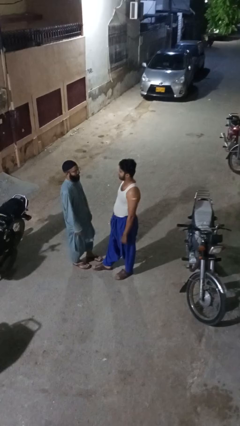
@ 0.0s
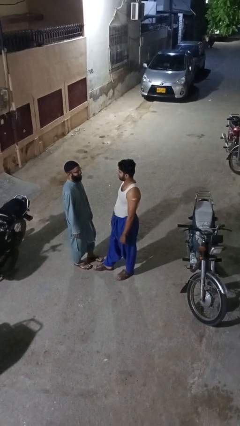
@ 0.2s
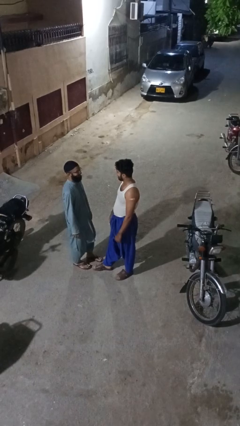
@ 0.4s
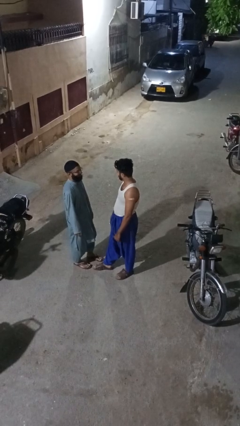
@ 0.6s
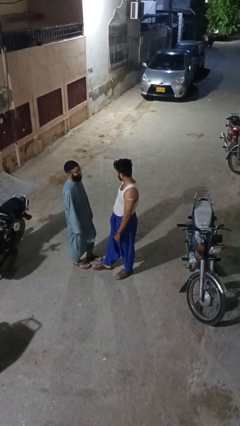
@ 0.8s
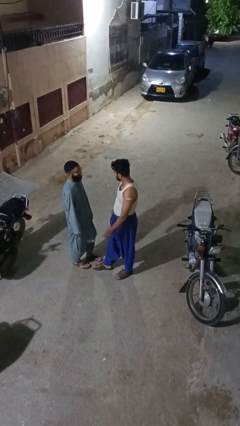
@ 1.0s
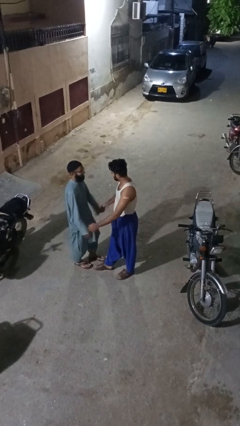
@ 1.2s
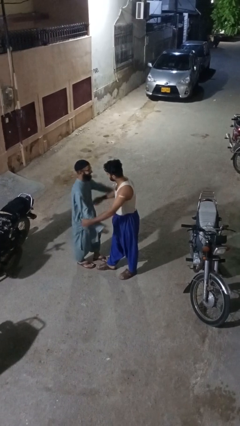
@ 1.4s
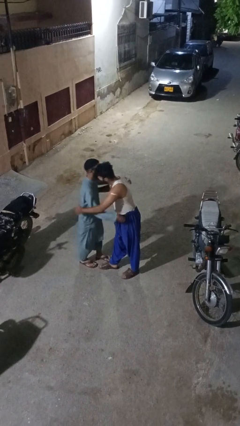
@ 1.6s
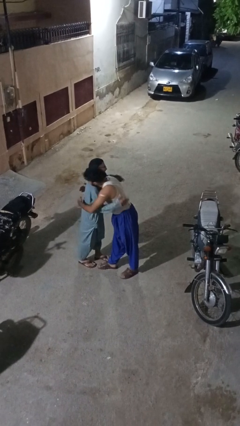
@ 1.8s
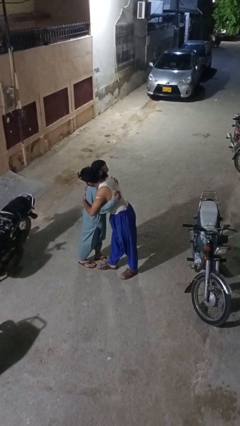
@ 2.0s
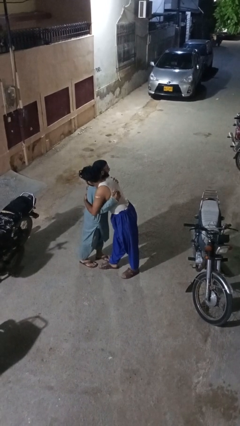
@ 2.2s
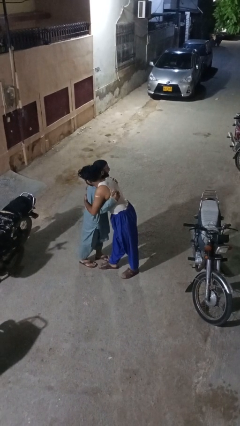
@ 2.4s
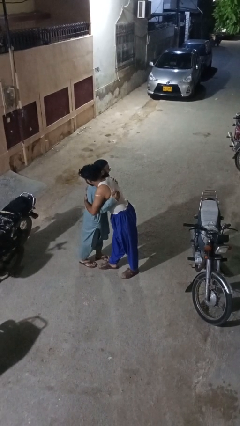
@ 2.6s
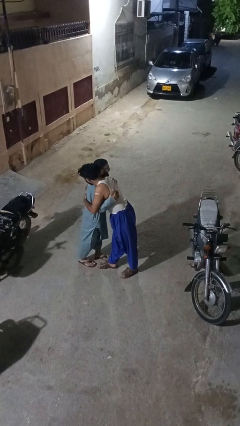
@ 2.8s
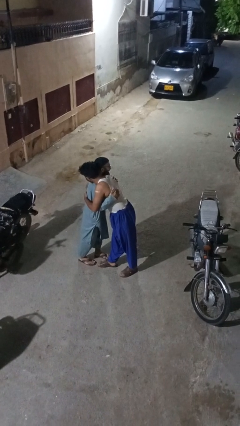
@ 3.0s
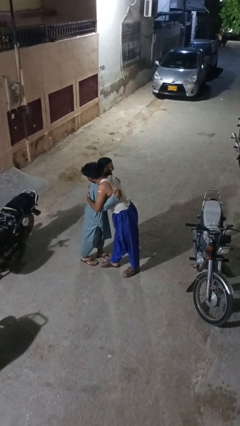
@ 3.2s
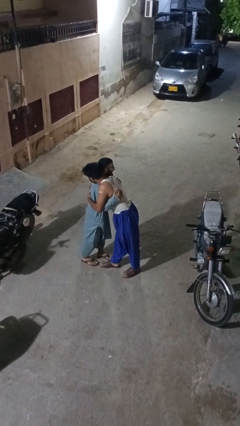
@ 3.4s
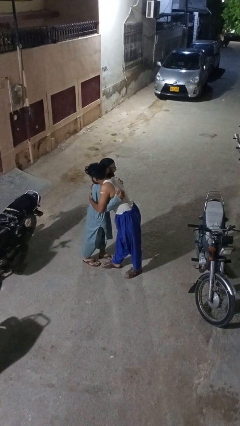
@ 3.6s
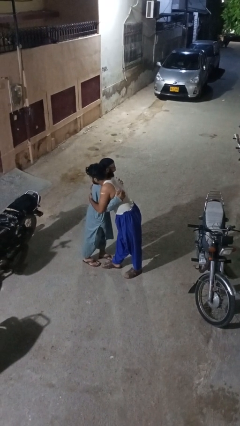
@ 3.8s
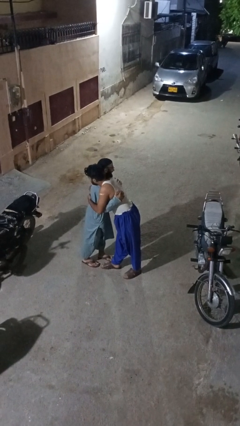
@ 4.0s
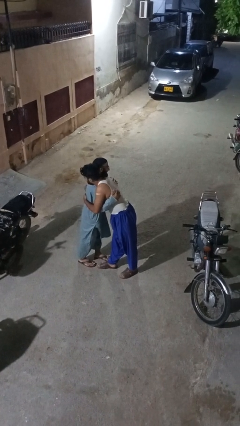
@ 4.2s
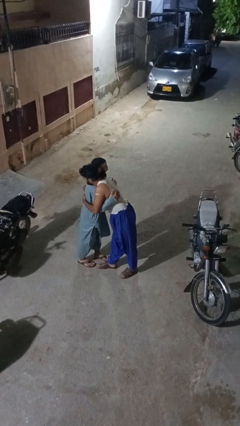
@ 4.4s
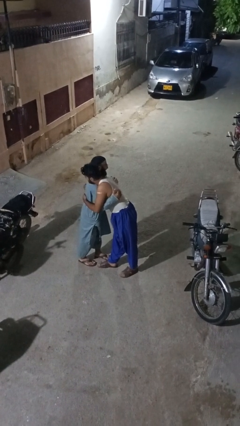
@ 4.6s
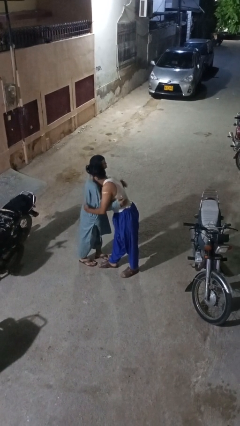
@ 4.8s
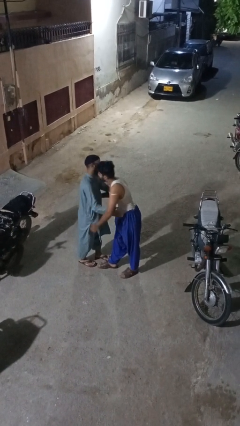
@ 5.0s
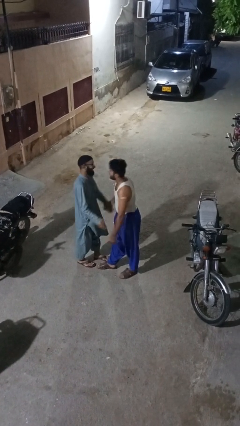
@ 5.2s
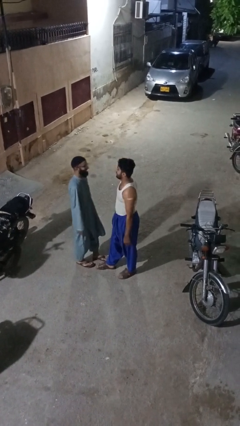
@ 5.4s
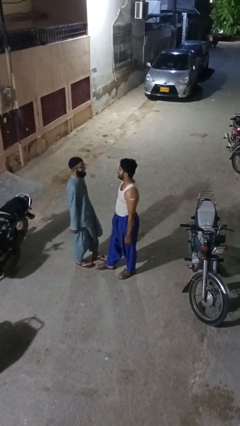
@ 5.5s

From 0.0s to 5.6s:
person kisses cheek of person
